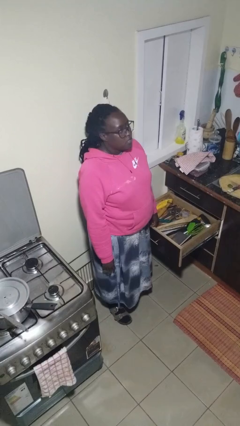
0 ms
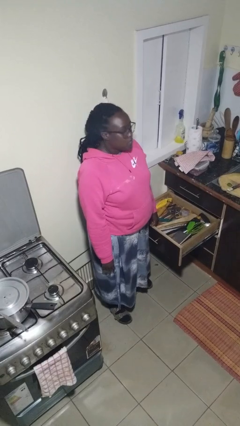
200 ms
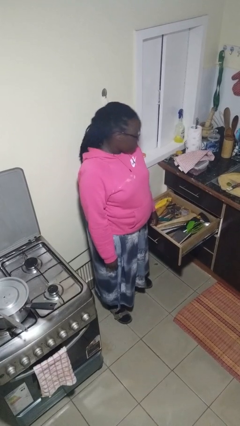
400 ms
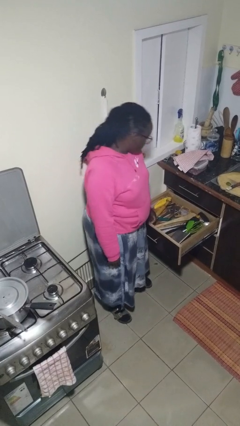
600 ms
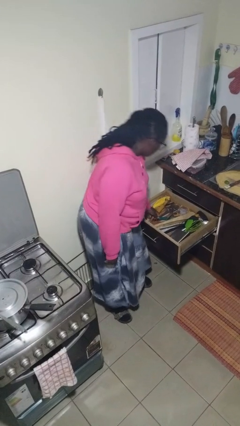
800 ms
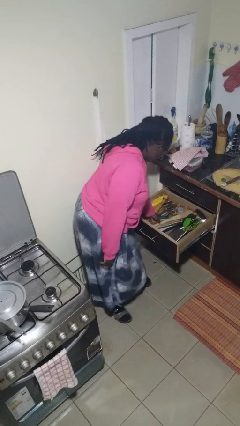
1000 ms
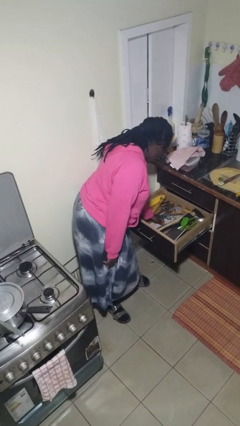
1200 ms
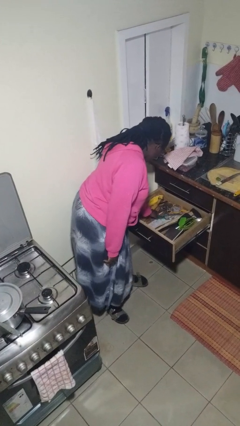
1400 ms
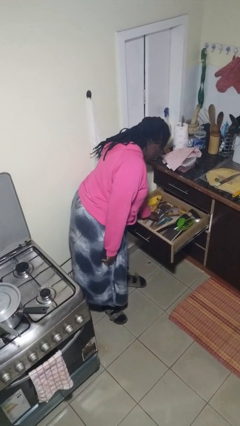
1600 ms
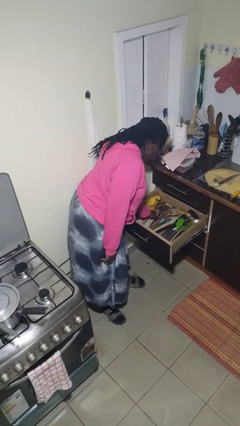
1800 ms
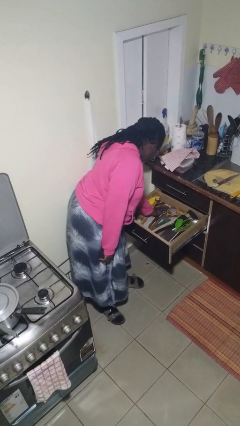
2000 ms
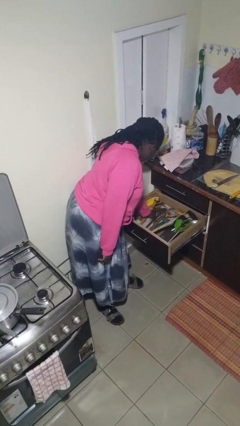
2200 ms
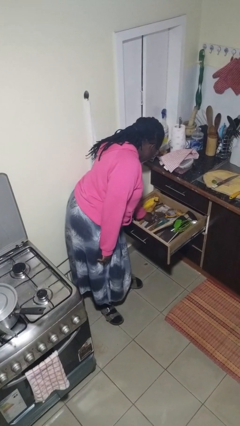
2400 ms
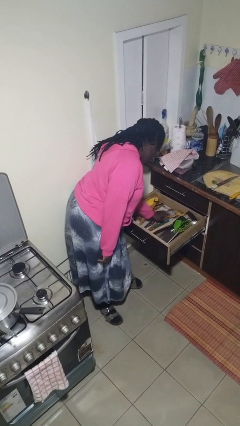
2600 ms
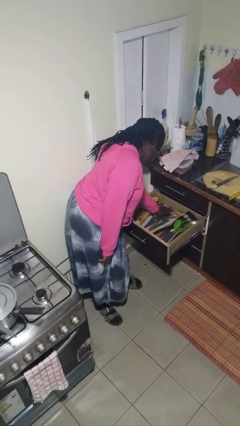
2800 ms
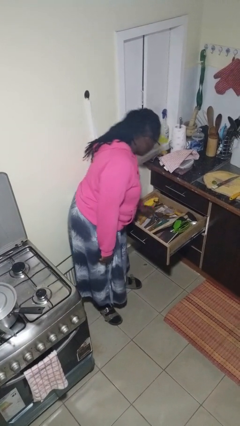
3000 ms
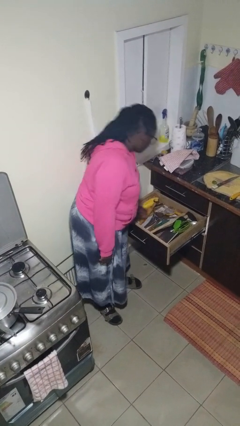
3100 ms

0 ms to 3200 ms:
person searches in kitchen drawer

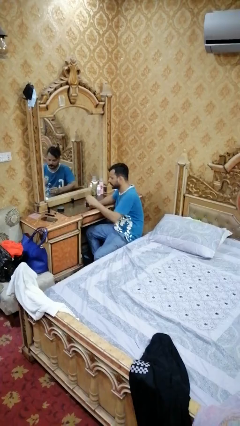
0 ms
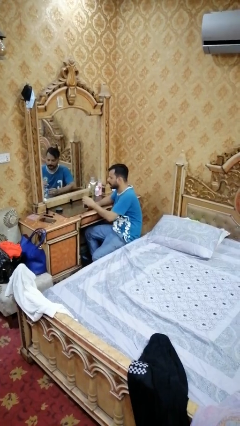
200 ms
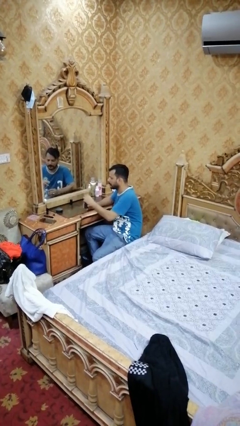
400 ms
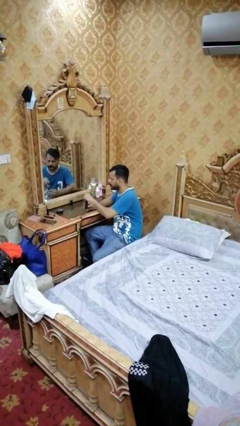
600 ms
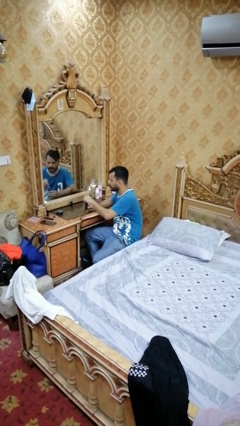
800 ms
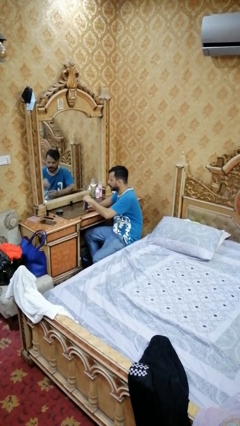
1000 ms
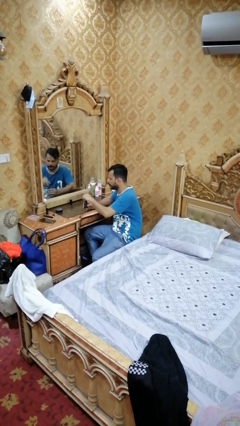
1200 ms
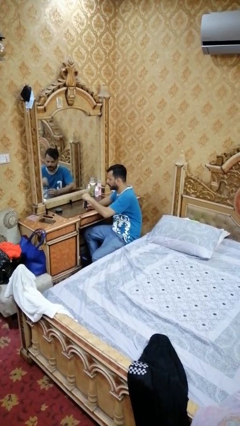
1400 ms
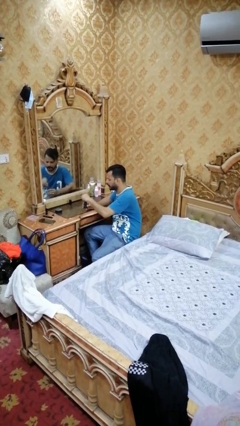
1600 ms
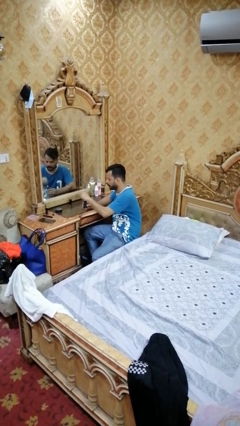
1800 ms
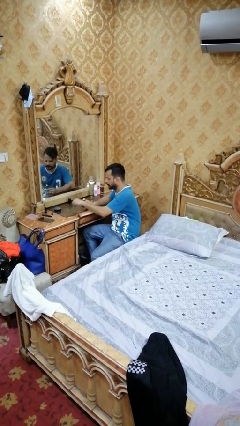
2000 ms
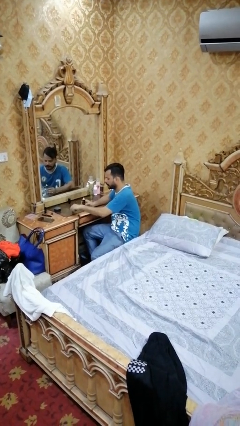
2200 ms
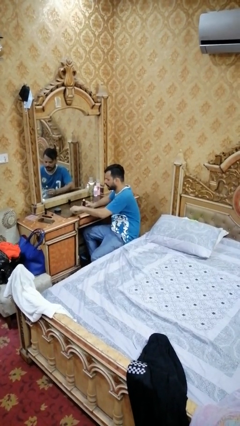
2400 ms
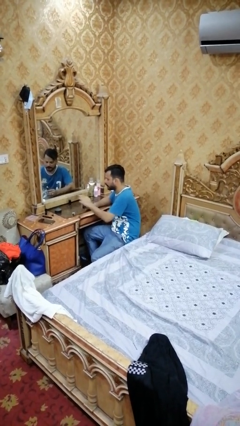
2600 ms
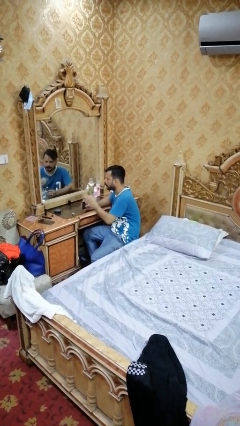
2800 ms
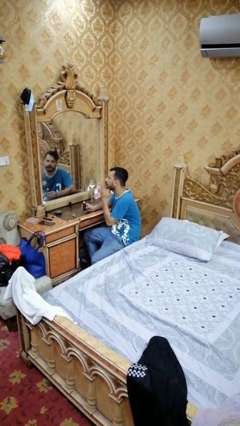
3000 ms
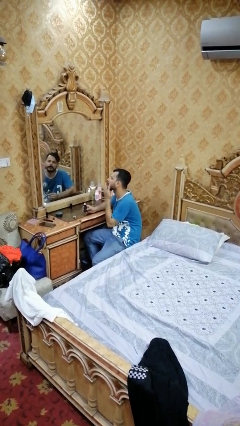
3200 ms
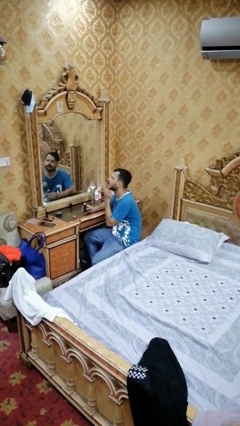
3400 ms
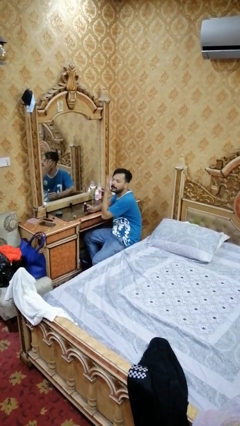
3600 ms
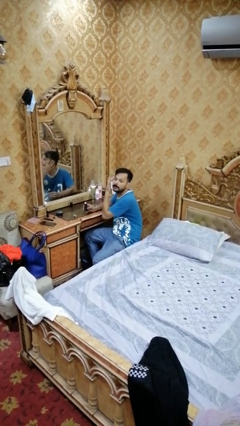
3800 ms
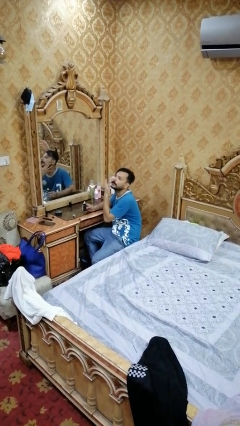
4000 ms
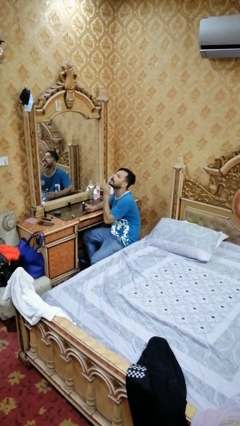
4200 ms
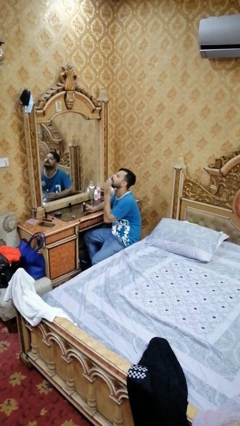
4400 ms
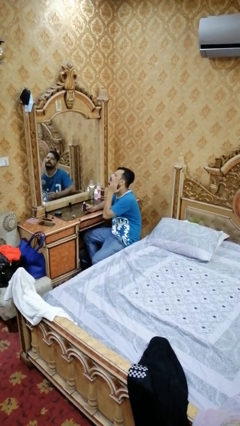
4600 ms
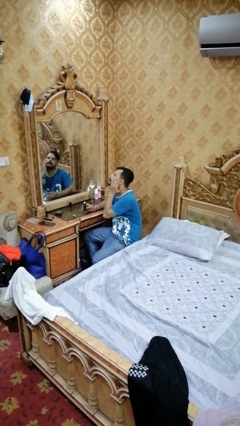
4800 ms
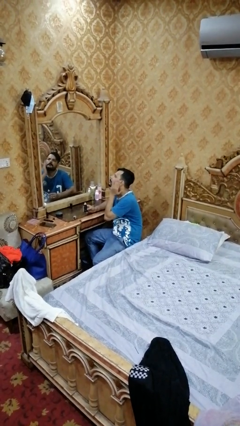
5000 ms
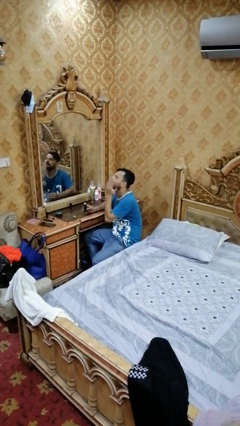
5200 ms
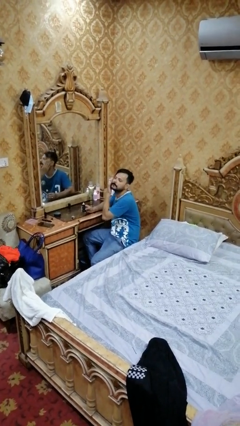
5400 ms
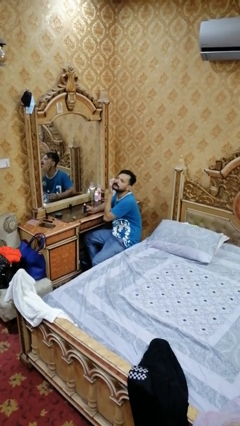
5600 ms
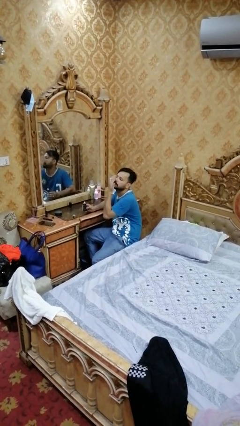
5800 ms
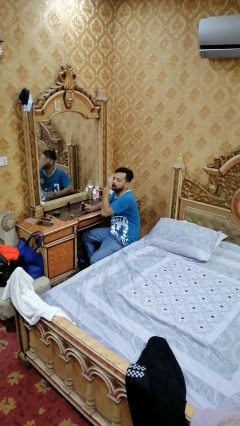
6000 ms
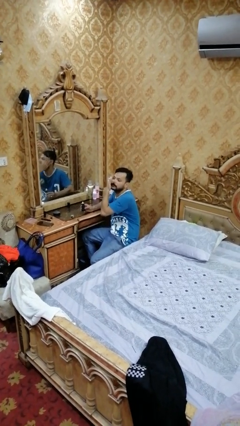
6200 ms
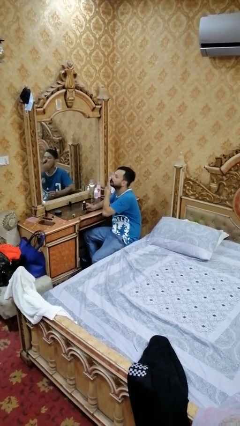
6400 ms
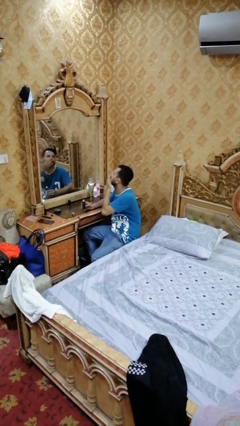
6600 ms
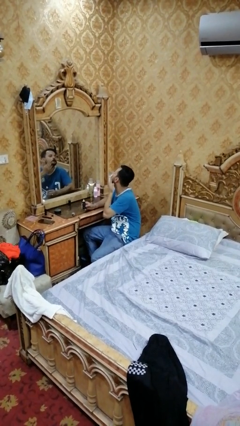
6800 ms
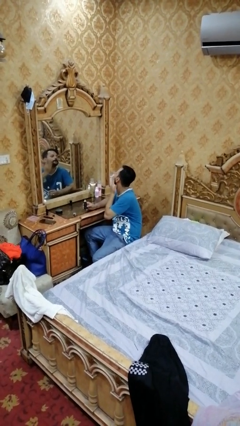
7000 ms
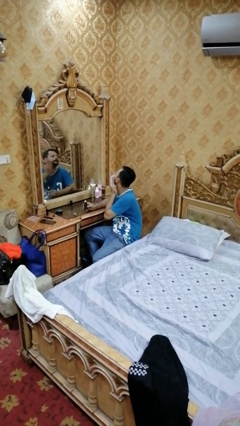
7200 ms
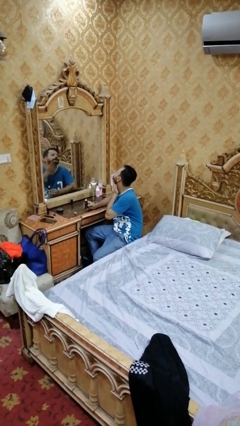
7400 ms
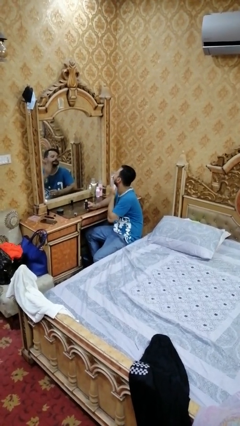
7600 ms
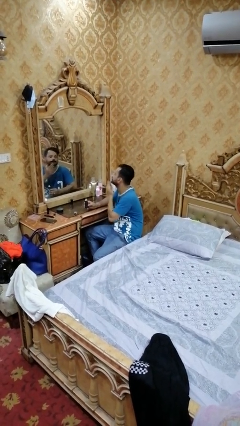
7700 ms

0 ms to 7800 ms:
person applies foundation makeup

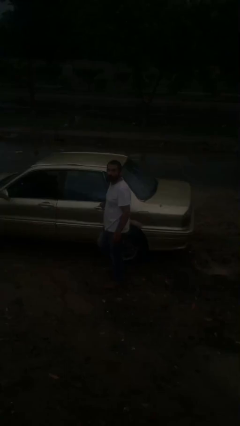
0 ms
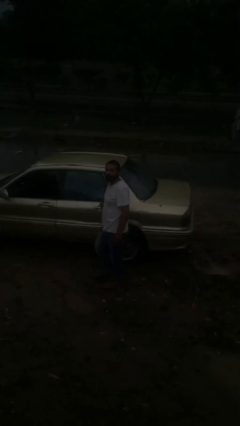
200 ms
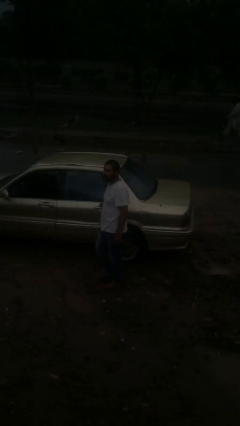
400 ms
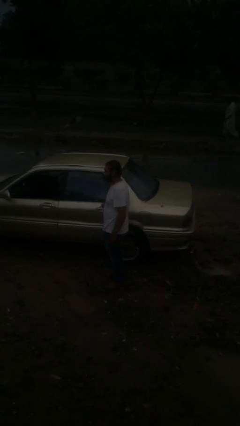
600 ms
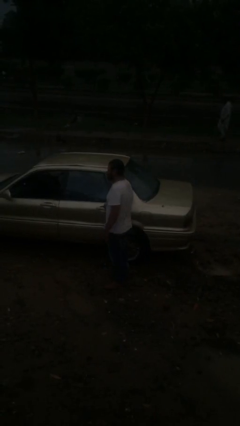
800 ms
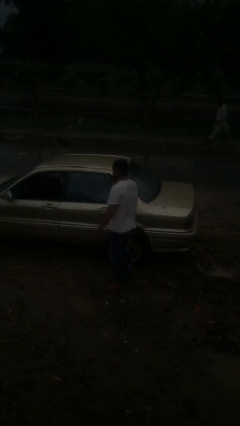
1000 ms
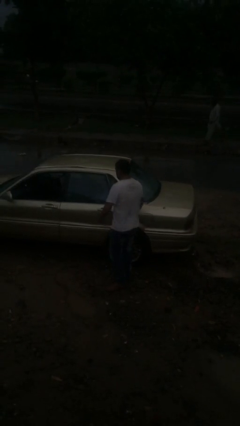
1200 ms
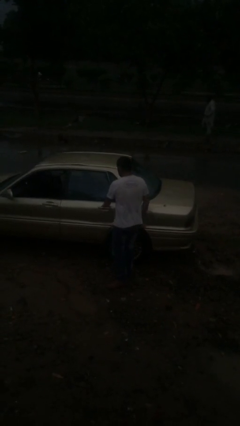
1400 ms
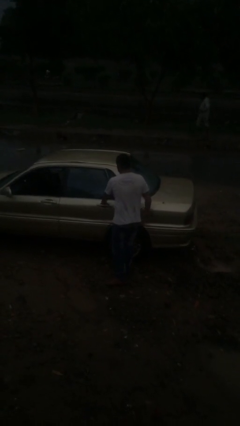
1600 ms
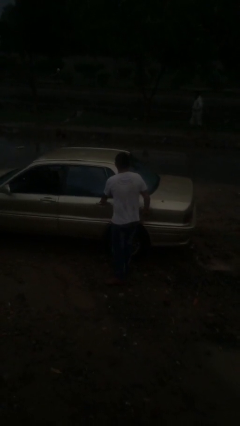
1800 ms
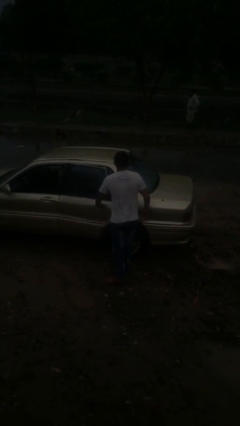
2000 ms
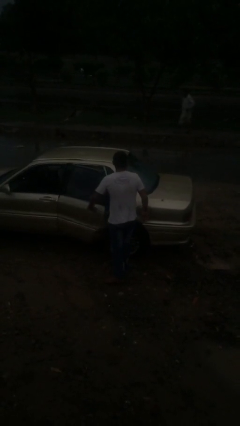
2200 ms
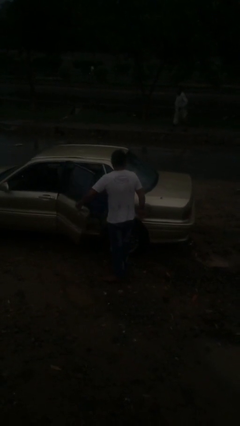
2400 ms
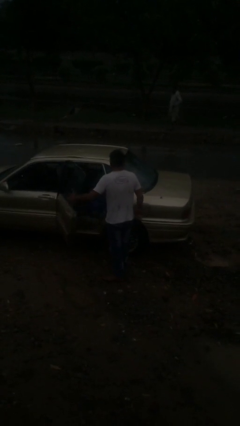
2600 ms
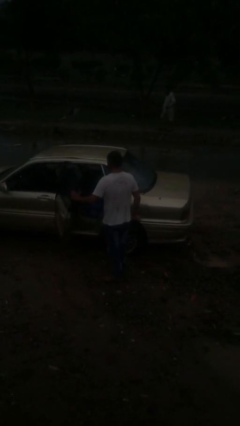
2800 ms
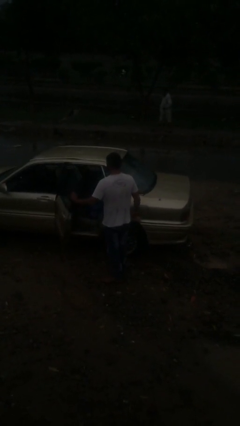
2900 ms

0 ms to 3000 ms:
person opens car door

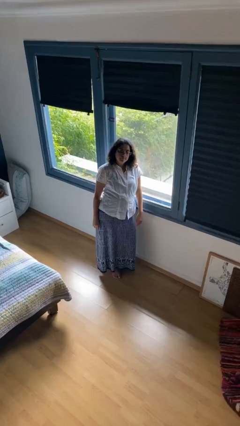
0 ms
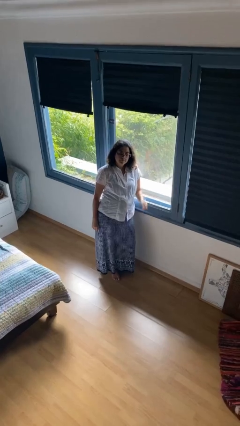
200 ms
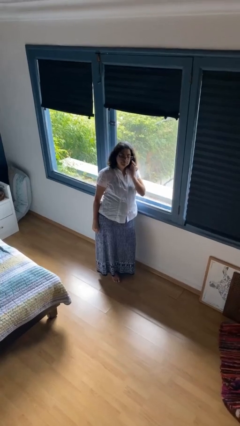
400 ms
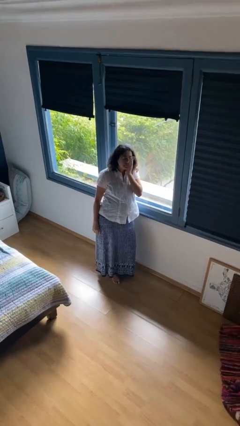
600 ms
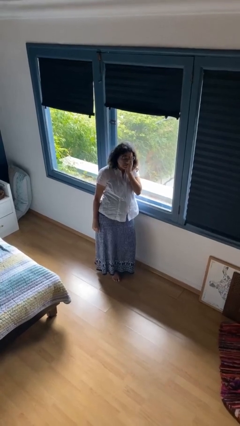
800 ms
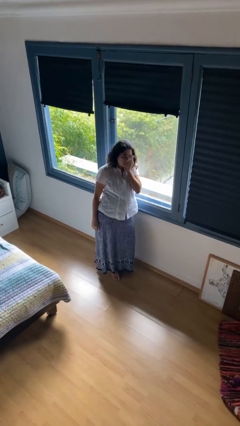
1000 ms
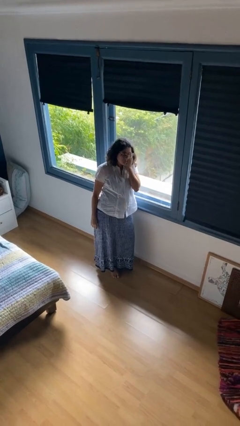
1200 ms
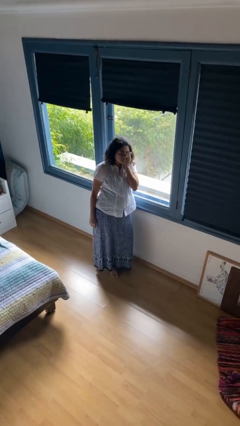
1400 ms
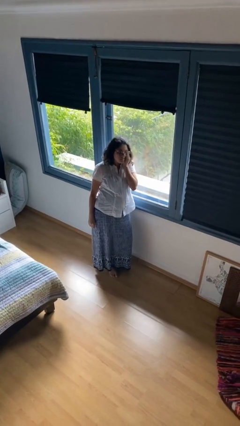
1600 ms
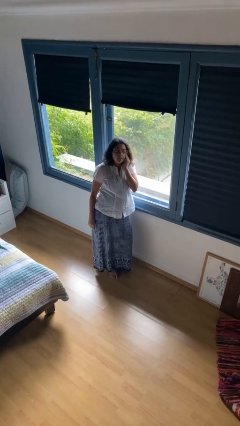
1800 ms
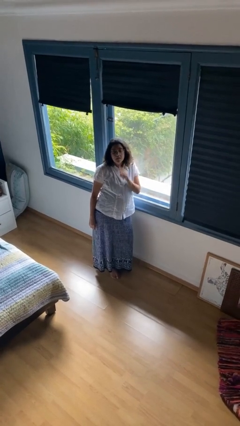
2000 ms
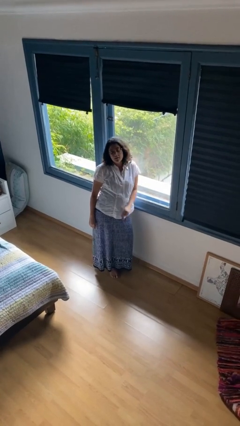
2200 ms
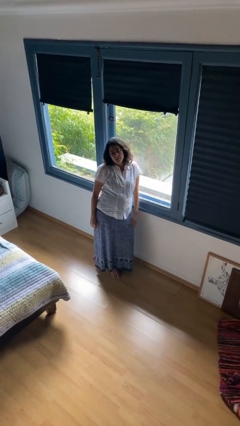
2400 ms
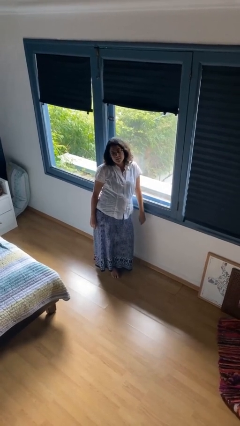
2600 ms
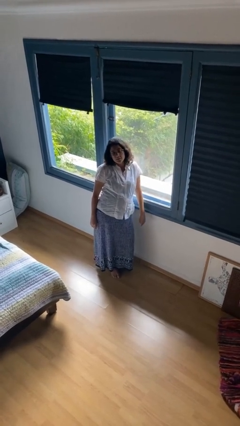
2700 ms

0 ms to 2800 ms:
person rubs eyes

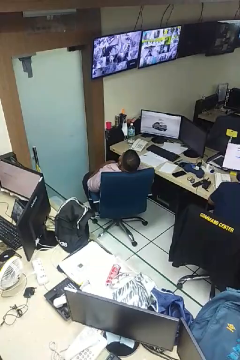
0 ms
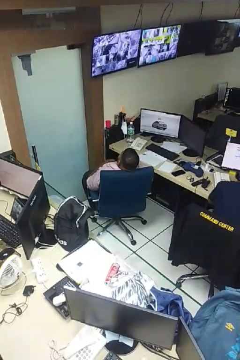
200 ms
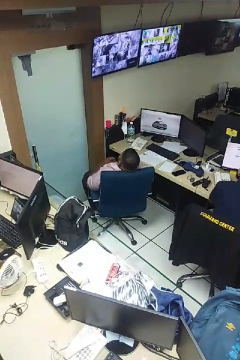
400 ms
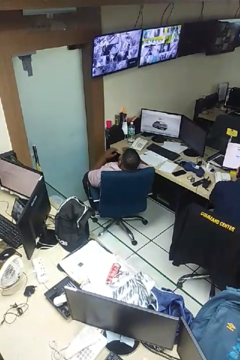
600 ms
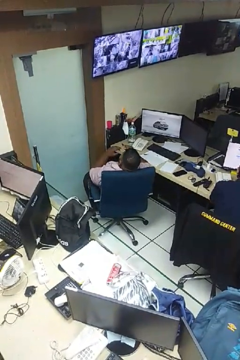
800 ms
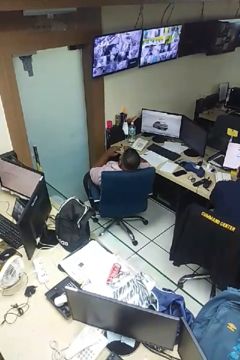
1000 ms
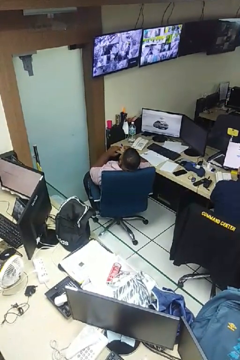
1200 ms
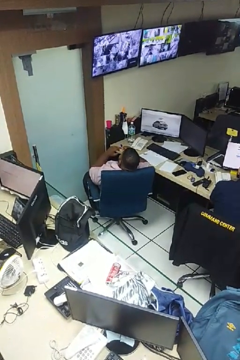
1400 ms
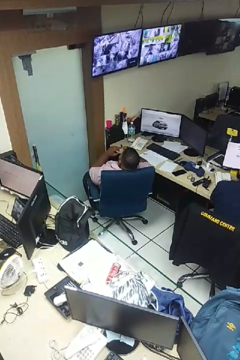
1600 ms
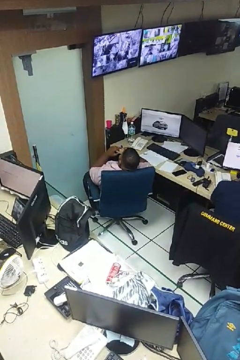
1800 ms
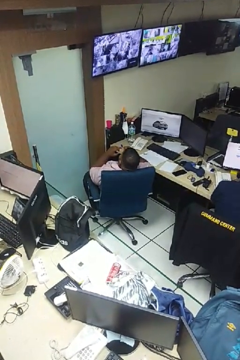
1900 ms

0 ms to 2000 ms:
person files fingernails
